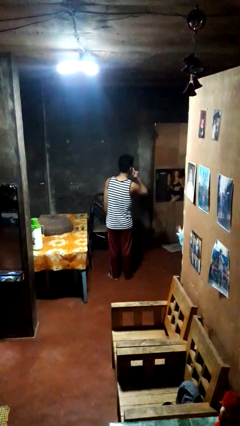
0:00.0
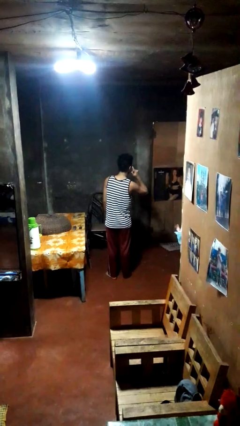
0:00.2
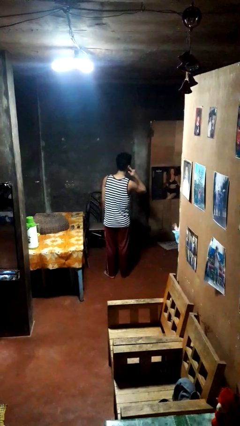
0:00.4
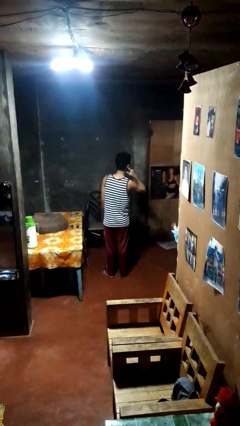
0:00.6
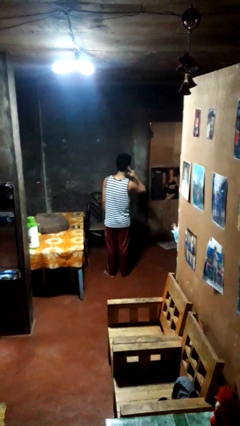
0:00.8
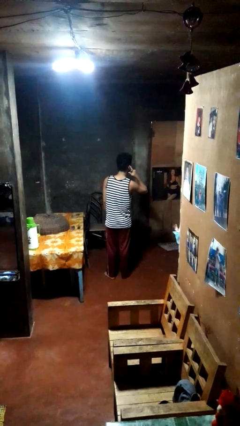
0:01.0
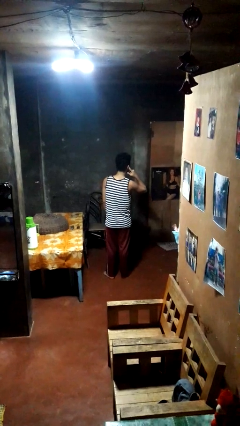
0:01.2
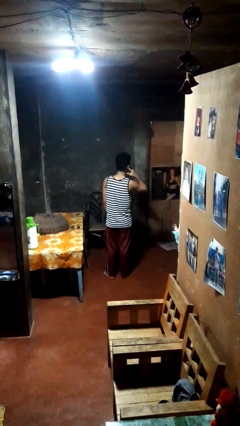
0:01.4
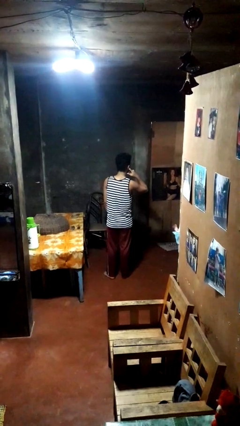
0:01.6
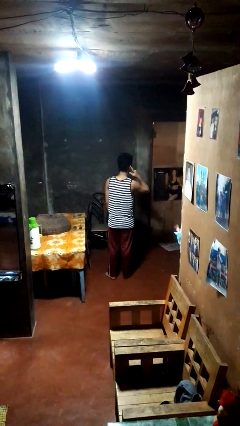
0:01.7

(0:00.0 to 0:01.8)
person gestures listen closely

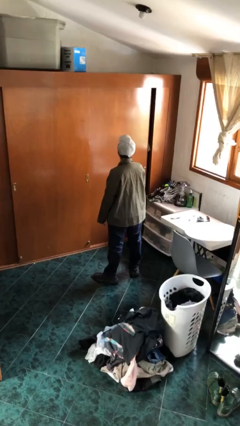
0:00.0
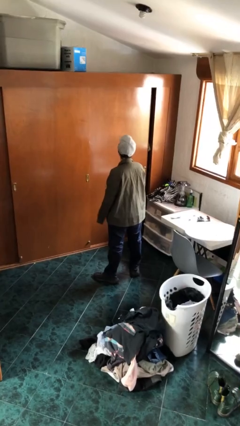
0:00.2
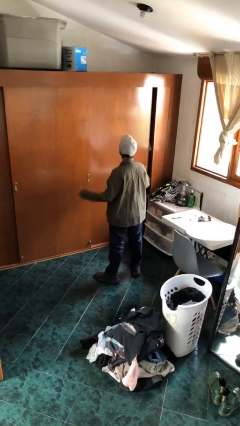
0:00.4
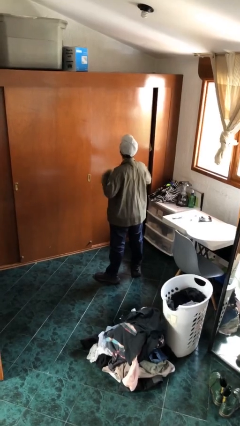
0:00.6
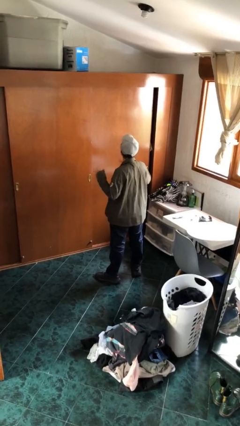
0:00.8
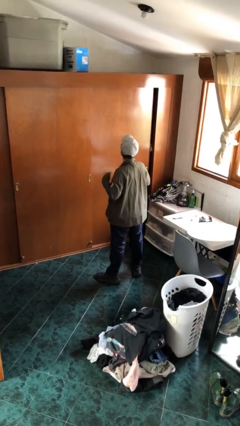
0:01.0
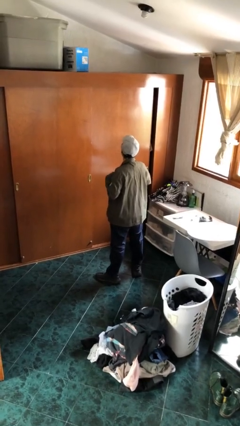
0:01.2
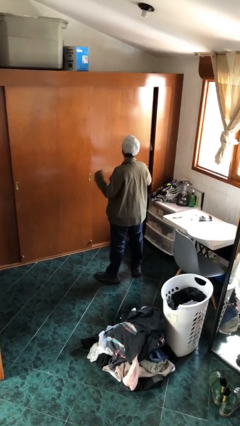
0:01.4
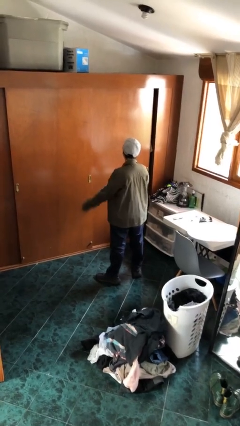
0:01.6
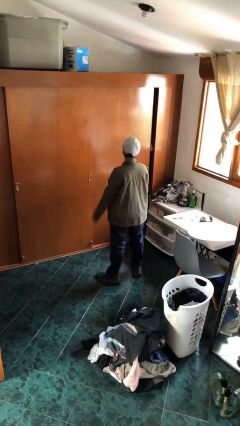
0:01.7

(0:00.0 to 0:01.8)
person drums on chest

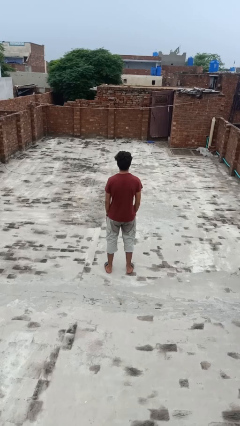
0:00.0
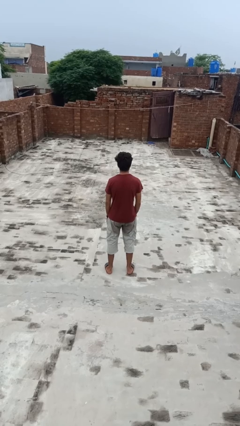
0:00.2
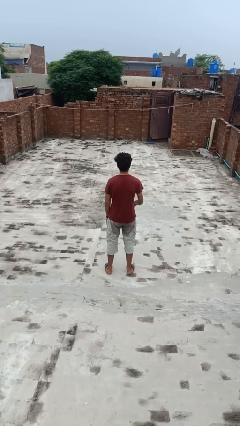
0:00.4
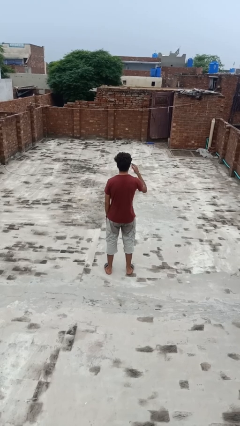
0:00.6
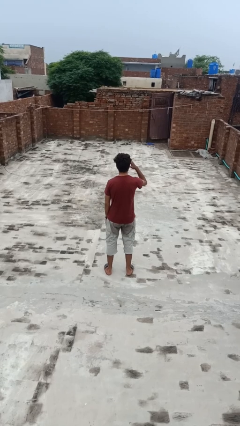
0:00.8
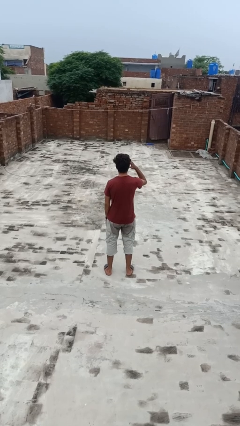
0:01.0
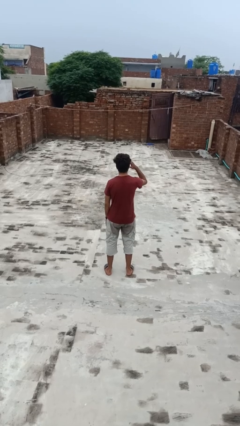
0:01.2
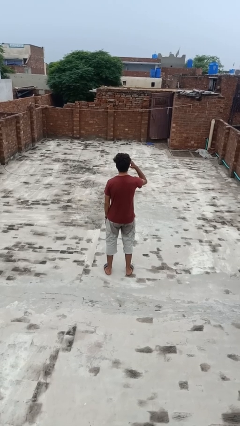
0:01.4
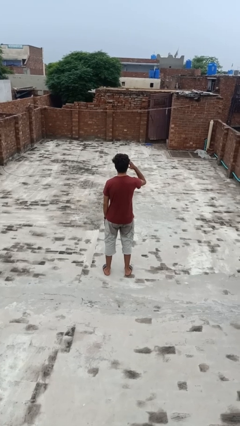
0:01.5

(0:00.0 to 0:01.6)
person salutes

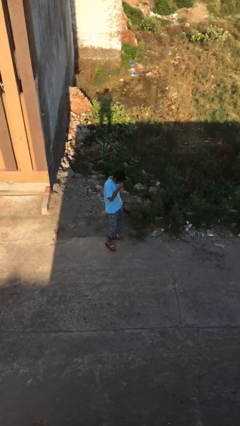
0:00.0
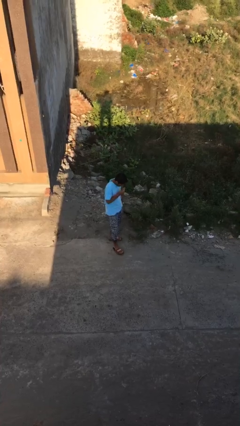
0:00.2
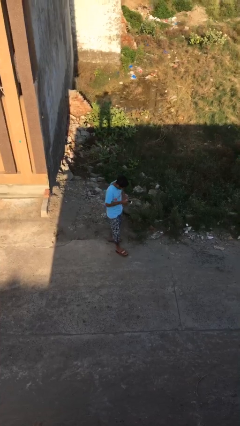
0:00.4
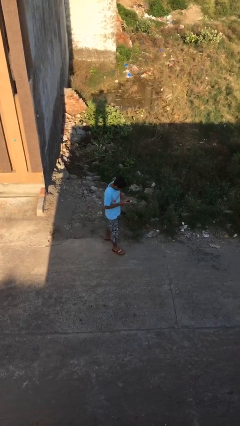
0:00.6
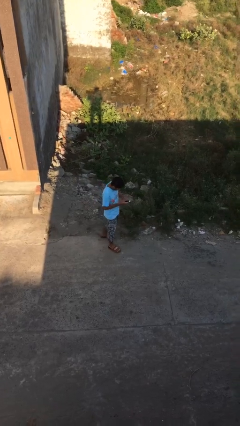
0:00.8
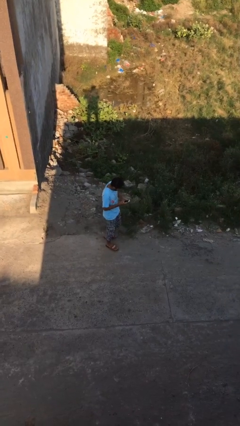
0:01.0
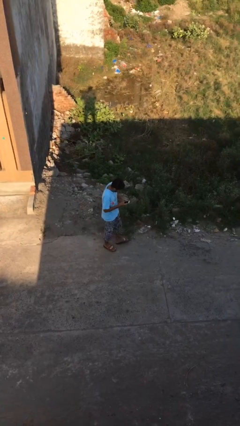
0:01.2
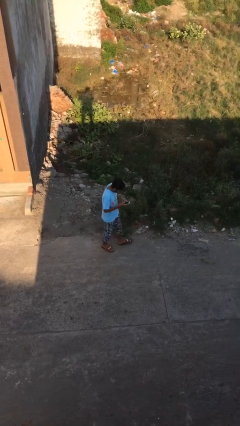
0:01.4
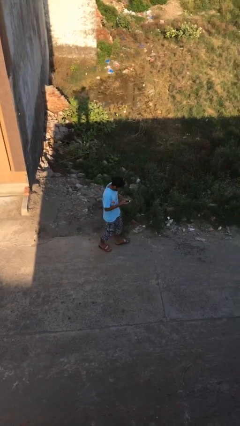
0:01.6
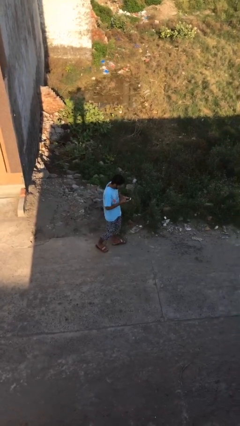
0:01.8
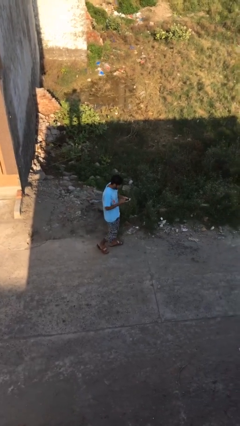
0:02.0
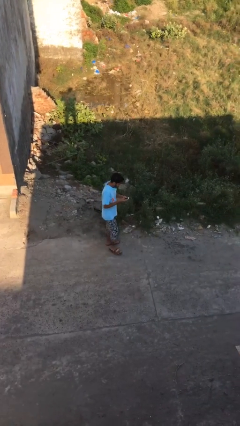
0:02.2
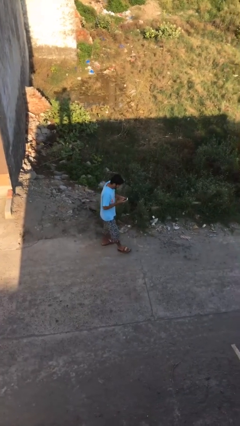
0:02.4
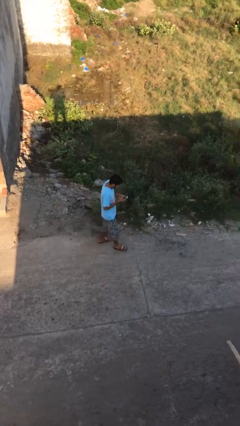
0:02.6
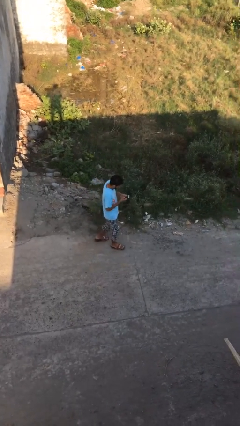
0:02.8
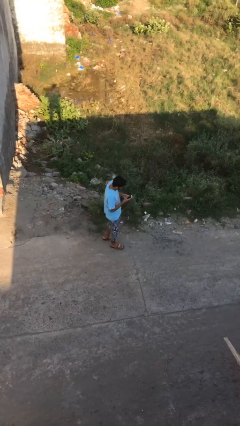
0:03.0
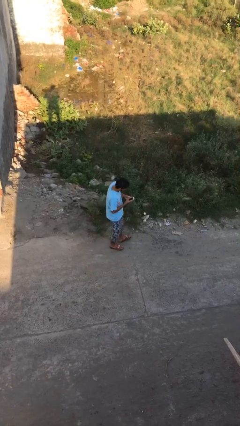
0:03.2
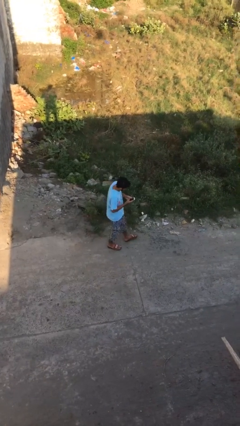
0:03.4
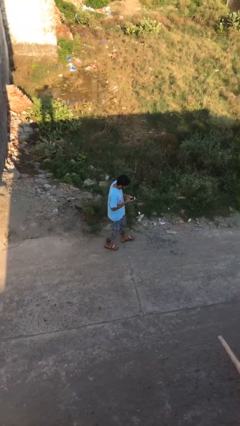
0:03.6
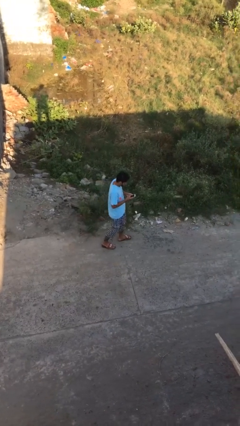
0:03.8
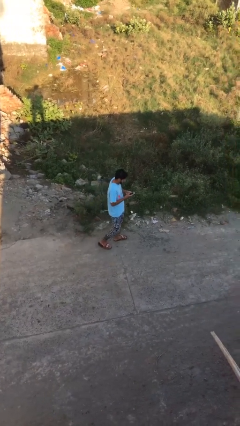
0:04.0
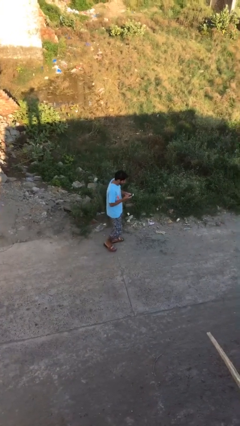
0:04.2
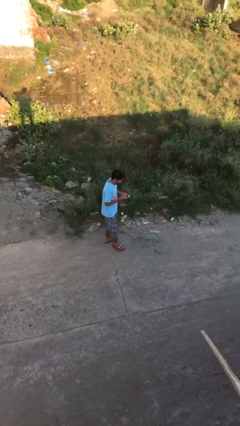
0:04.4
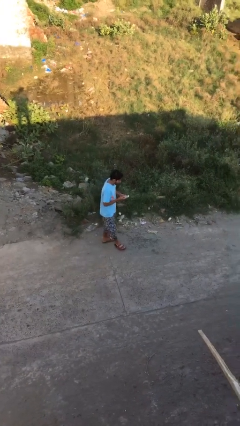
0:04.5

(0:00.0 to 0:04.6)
person texts on phone

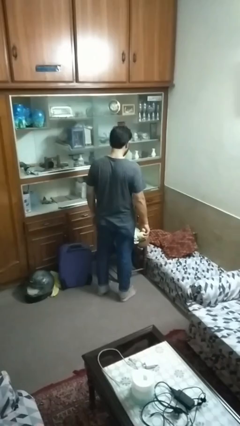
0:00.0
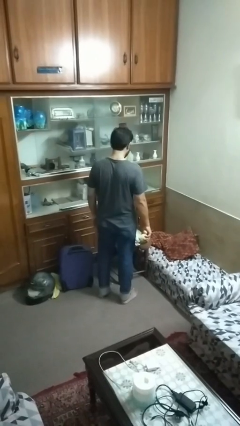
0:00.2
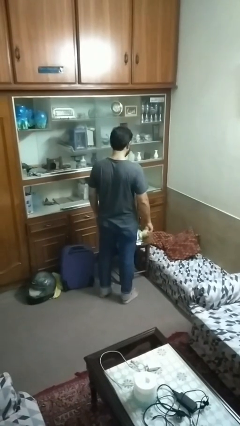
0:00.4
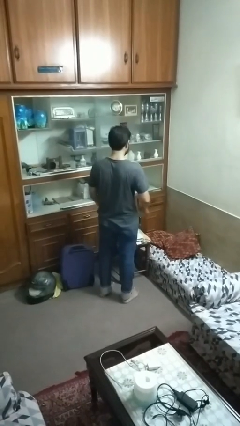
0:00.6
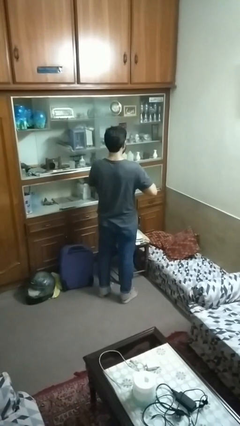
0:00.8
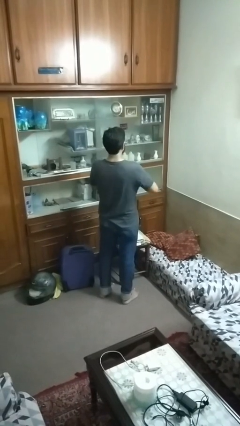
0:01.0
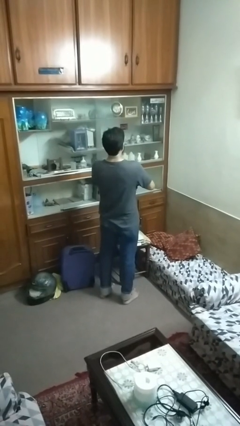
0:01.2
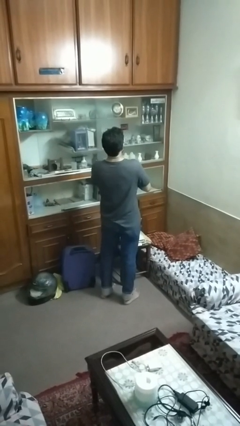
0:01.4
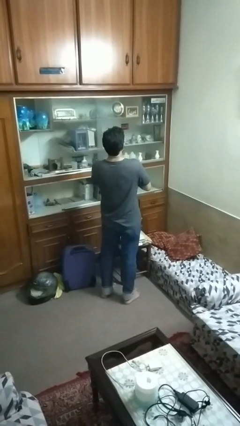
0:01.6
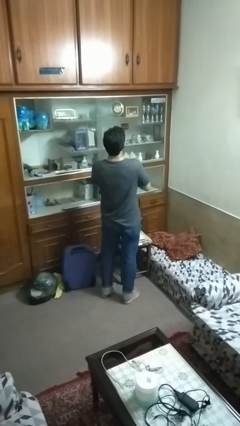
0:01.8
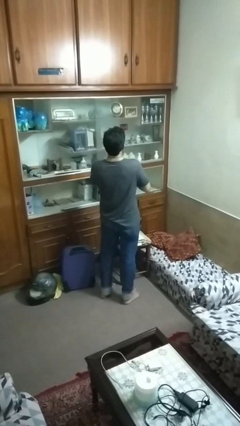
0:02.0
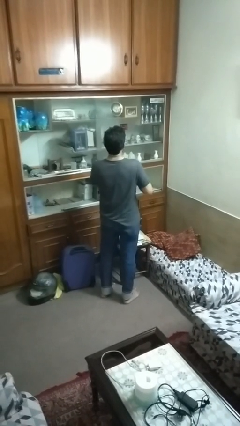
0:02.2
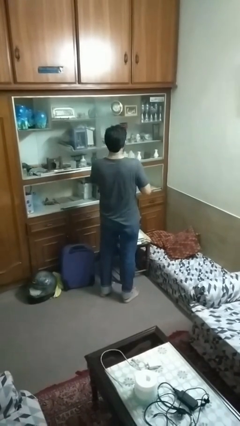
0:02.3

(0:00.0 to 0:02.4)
person hugs stuffed animal

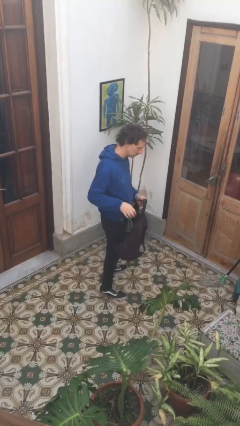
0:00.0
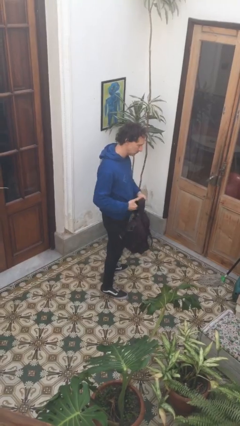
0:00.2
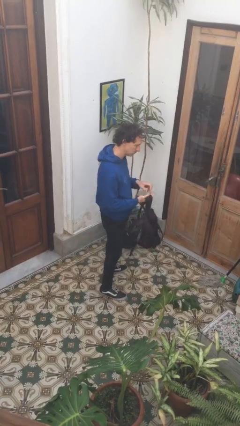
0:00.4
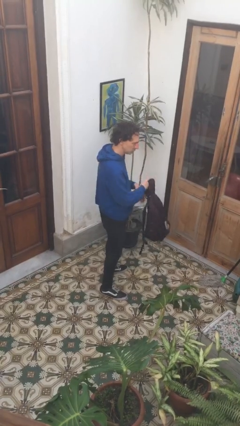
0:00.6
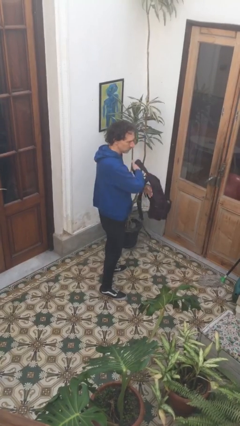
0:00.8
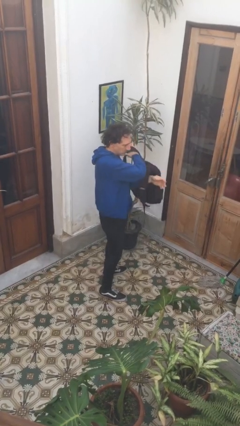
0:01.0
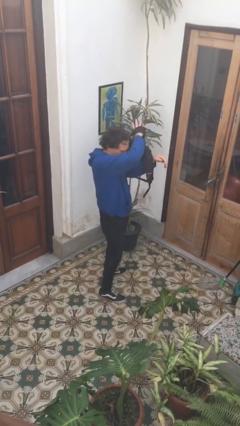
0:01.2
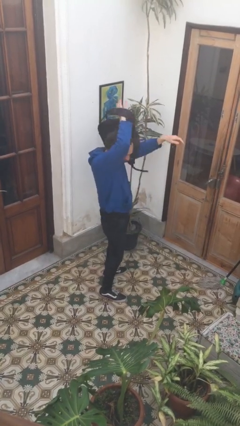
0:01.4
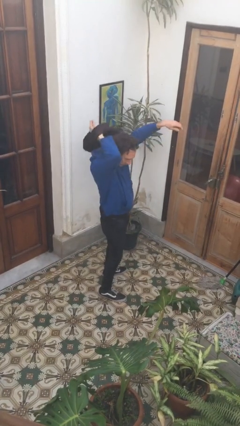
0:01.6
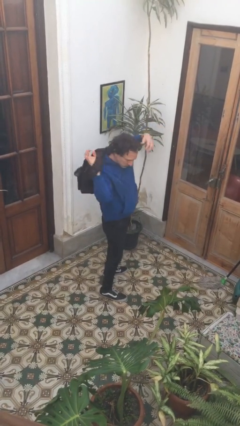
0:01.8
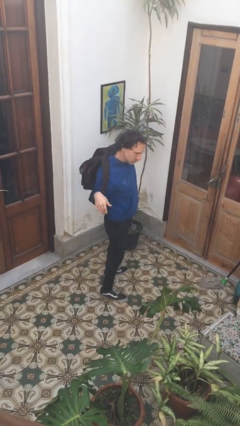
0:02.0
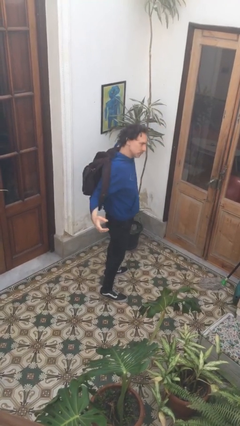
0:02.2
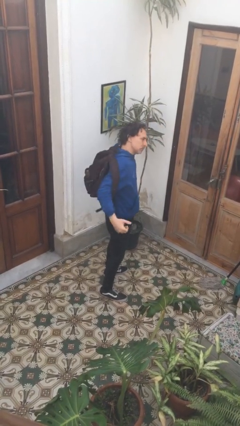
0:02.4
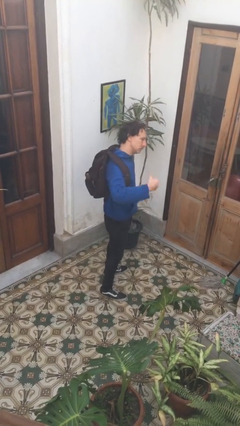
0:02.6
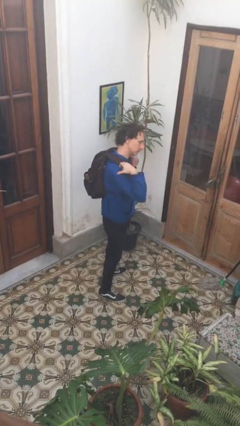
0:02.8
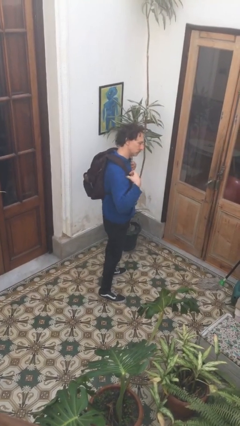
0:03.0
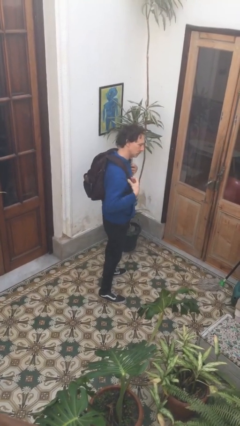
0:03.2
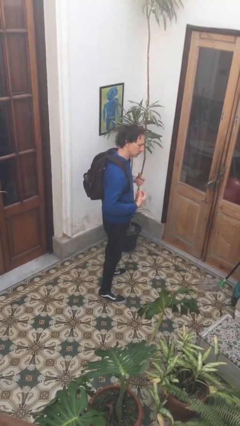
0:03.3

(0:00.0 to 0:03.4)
person puts on backpack

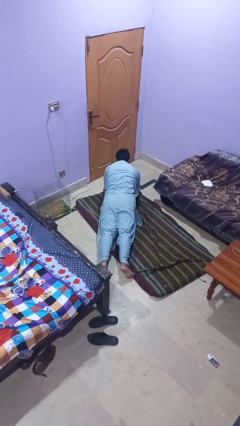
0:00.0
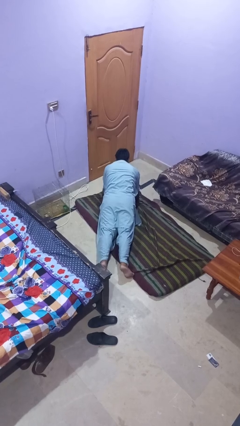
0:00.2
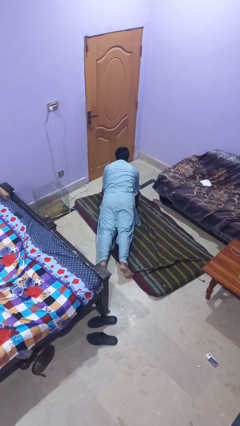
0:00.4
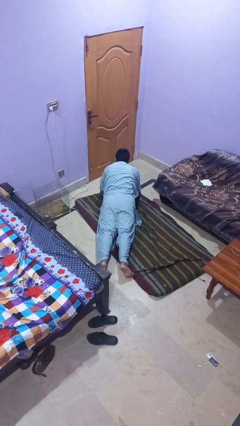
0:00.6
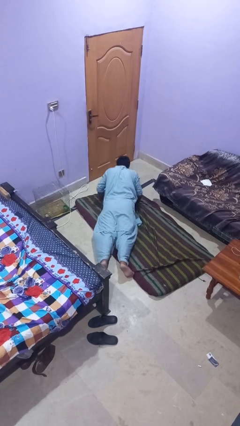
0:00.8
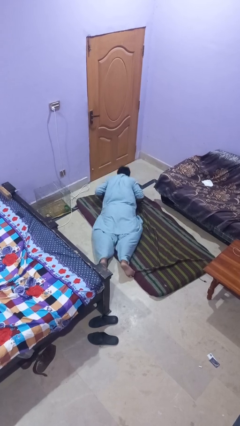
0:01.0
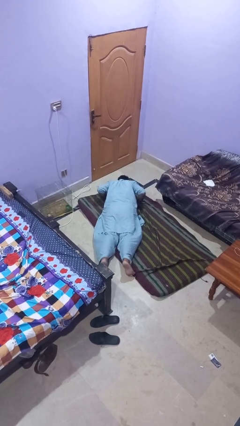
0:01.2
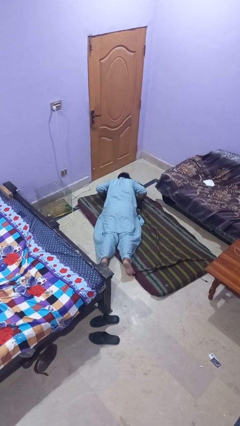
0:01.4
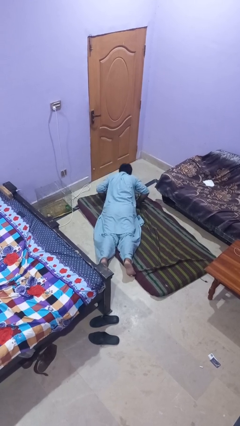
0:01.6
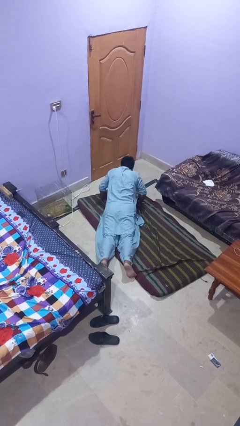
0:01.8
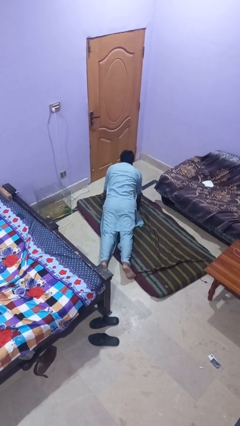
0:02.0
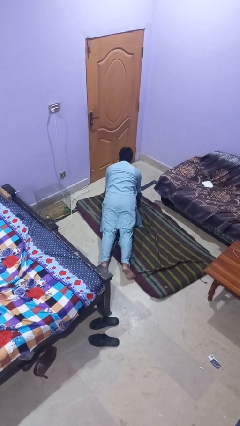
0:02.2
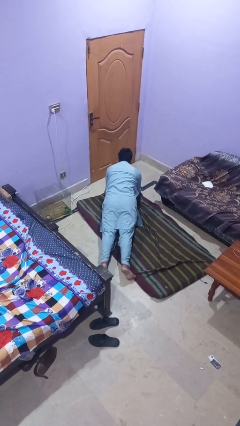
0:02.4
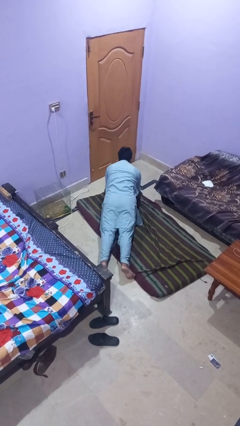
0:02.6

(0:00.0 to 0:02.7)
person exercises with pushup
